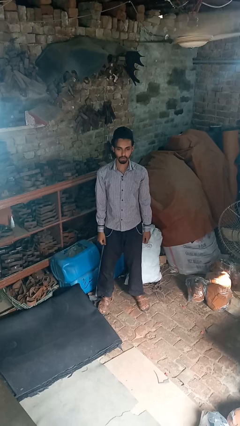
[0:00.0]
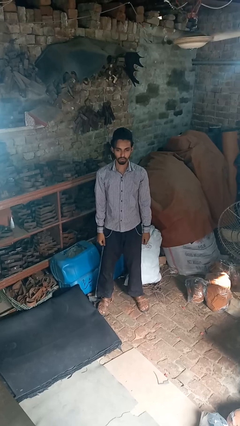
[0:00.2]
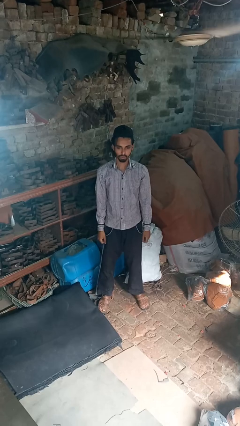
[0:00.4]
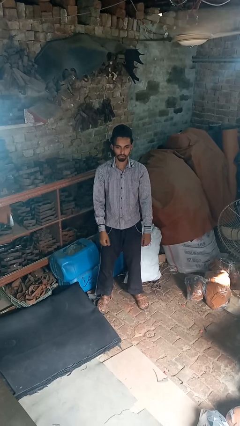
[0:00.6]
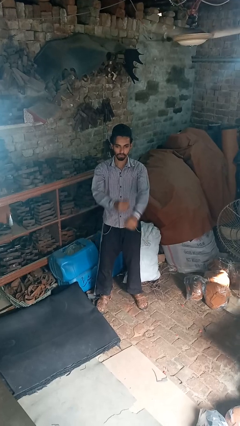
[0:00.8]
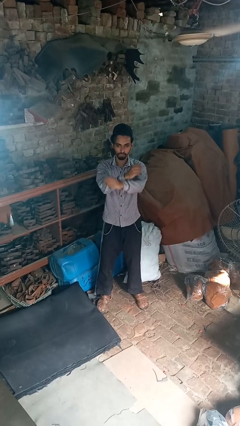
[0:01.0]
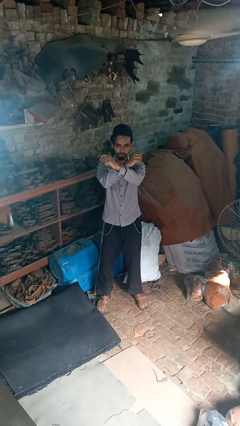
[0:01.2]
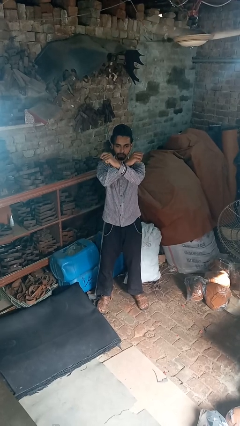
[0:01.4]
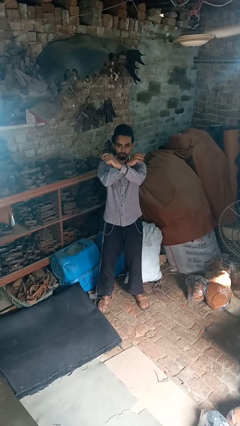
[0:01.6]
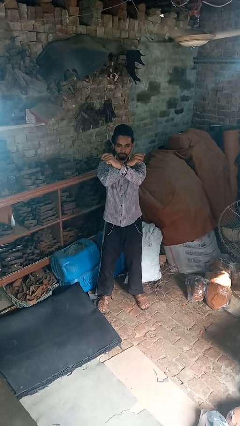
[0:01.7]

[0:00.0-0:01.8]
person crosses arms

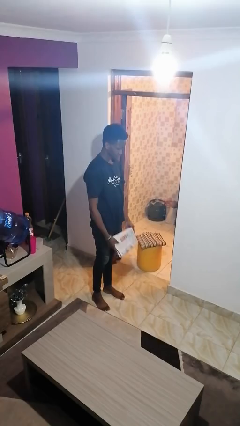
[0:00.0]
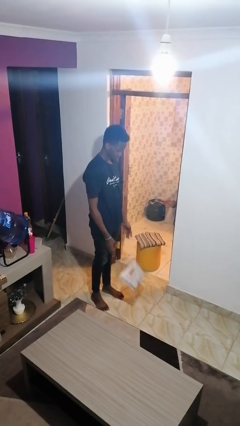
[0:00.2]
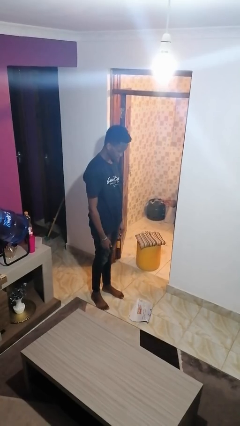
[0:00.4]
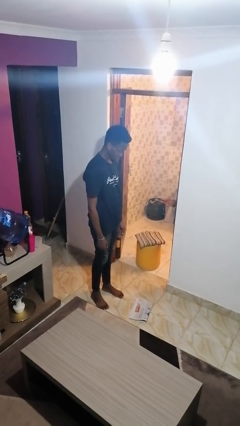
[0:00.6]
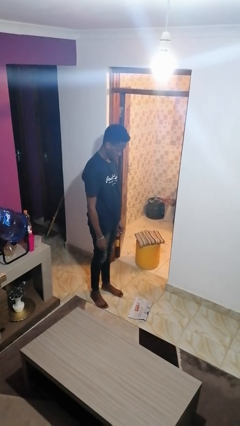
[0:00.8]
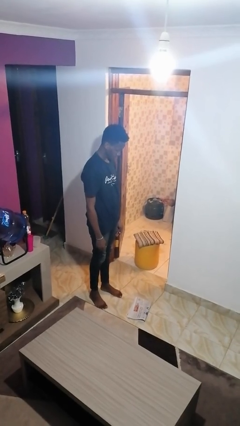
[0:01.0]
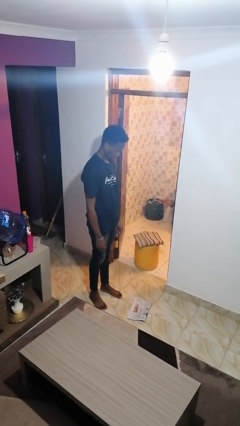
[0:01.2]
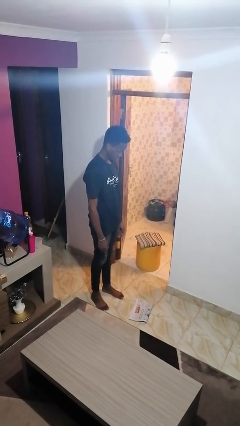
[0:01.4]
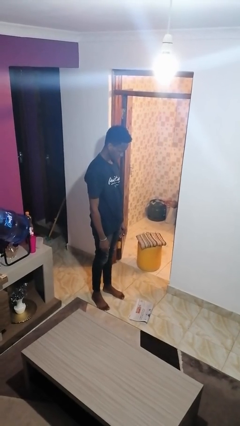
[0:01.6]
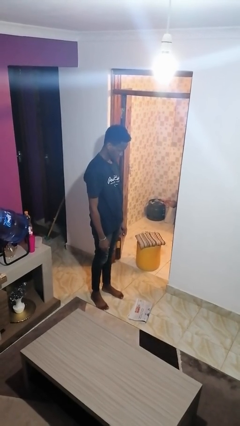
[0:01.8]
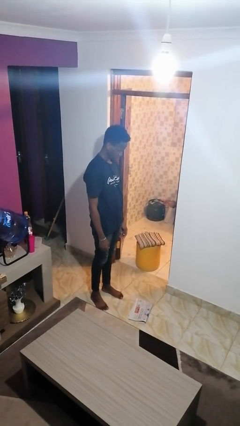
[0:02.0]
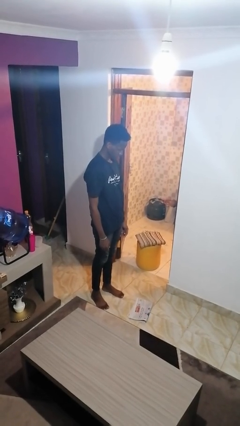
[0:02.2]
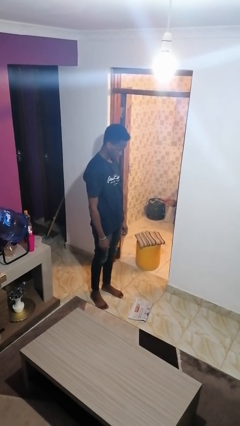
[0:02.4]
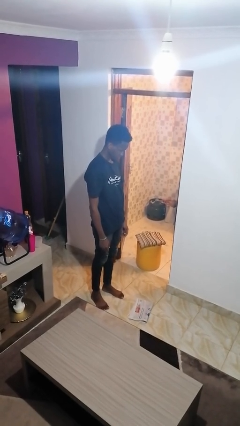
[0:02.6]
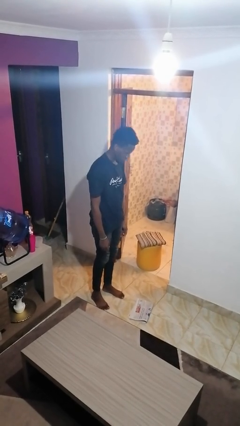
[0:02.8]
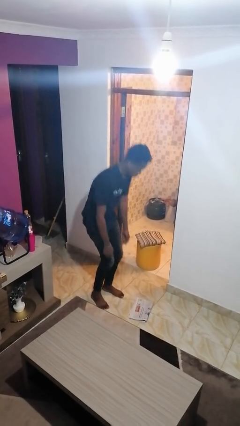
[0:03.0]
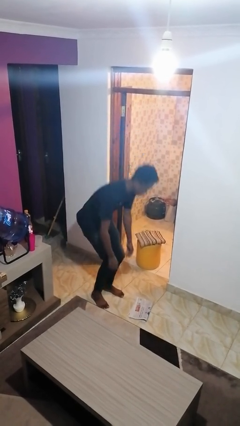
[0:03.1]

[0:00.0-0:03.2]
person drops object

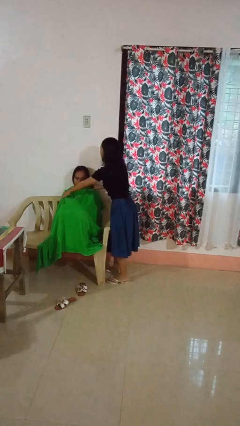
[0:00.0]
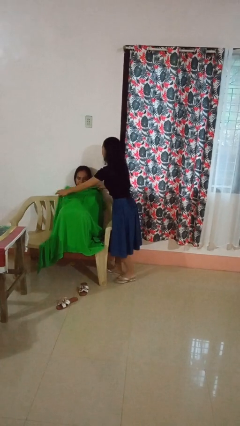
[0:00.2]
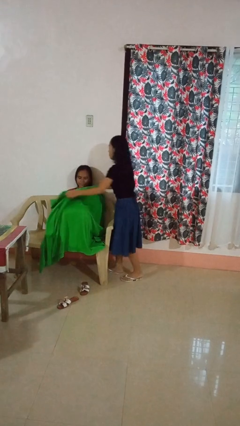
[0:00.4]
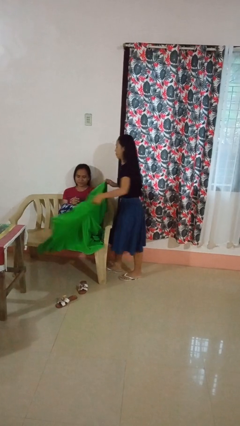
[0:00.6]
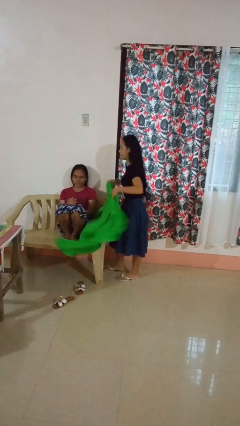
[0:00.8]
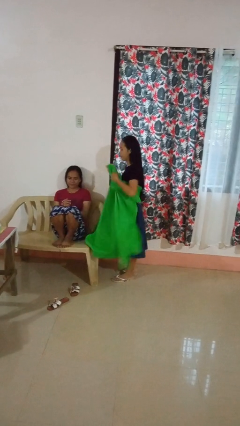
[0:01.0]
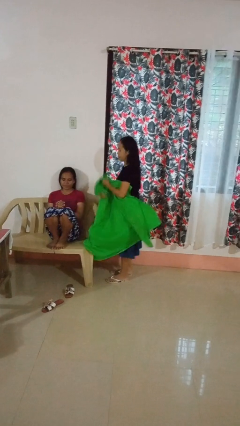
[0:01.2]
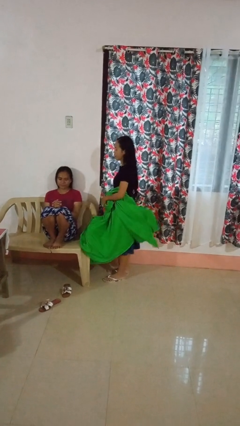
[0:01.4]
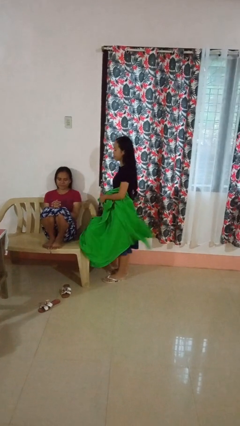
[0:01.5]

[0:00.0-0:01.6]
person uncovers friend with blanket

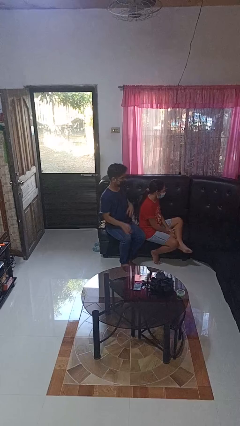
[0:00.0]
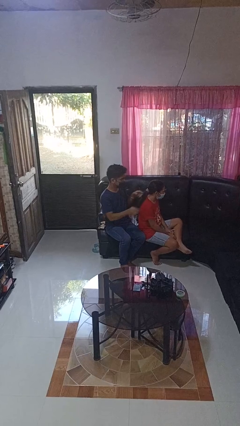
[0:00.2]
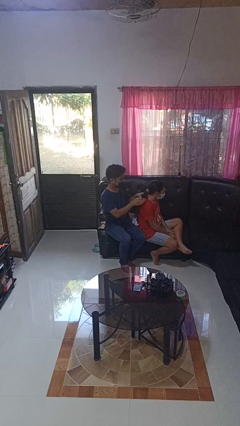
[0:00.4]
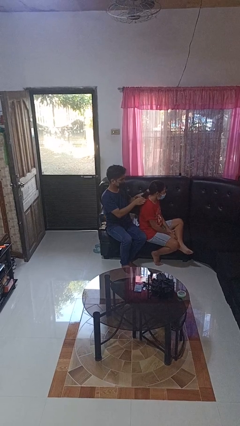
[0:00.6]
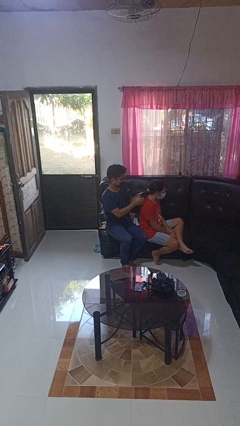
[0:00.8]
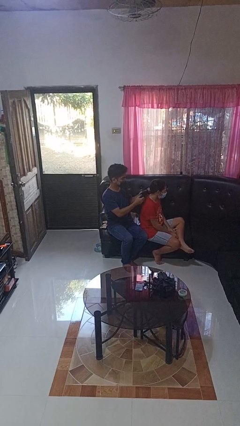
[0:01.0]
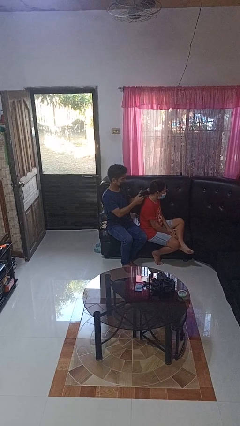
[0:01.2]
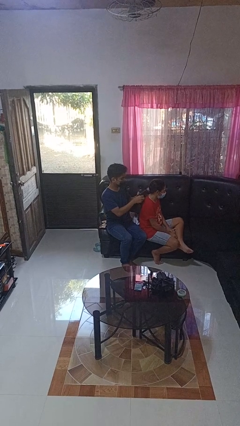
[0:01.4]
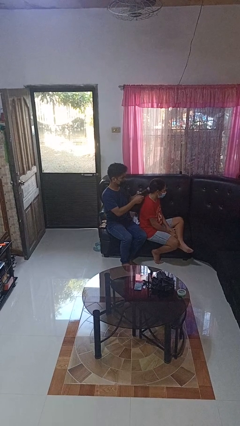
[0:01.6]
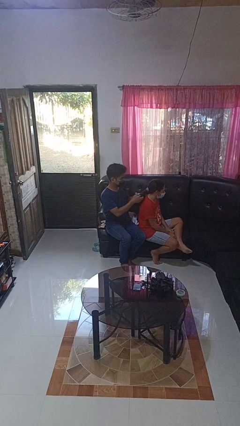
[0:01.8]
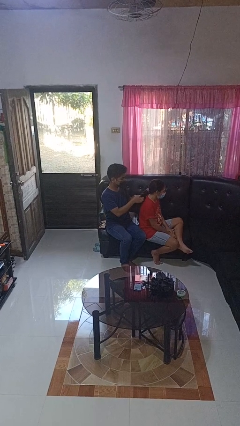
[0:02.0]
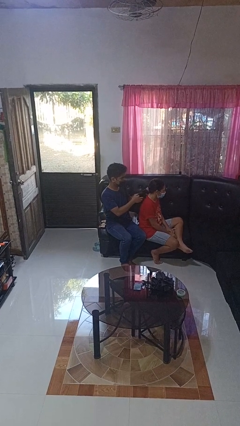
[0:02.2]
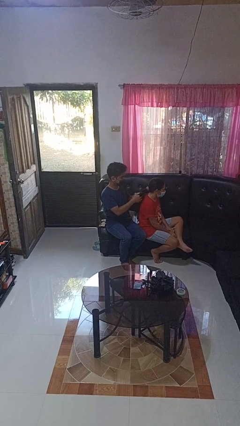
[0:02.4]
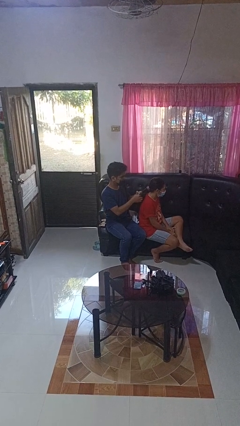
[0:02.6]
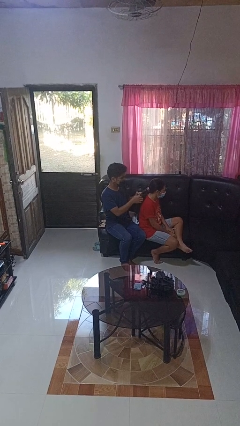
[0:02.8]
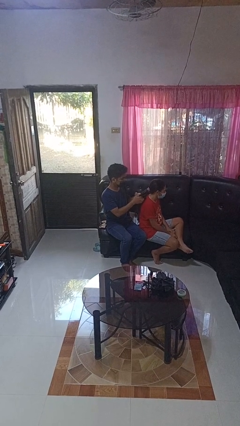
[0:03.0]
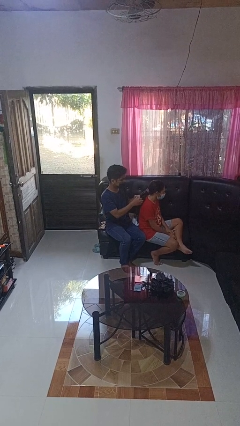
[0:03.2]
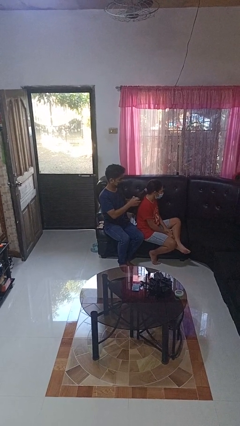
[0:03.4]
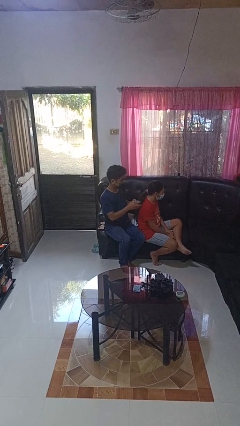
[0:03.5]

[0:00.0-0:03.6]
person braids hair of person

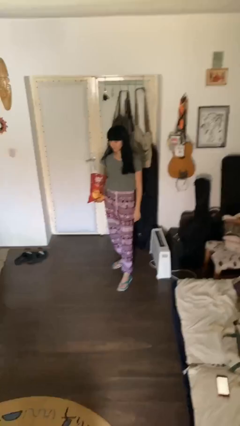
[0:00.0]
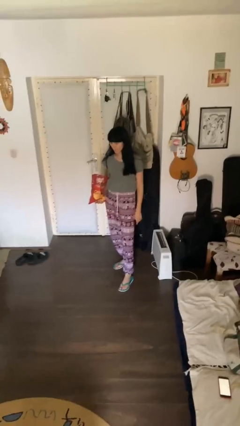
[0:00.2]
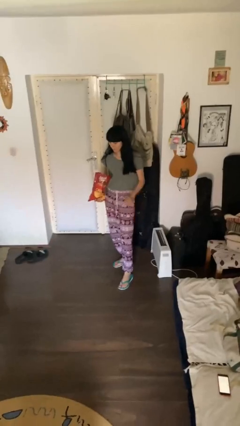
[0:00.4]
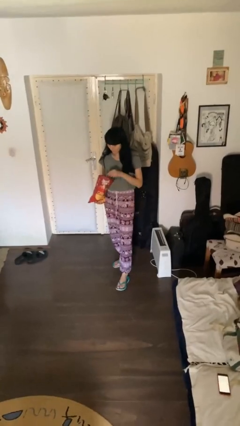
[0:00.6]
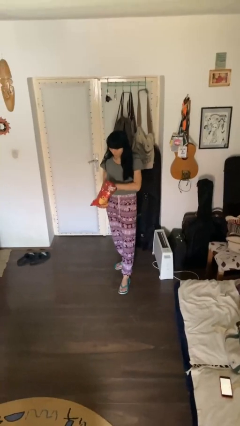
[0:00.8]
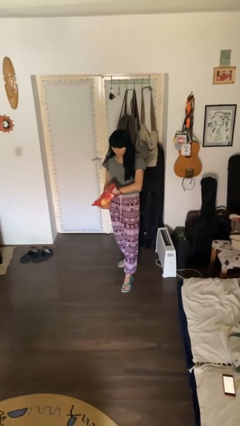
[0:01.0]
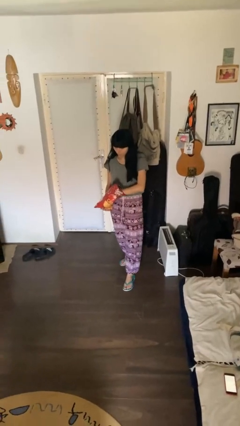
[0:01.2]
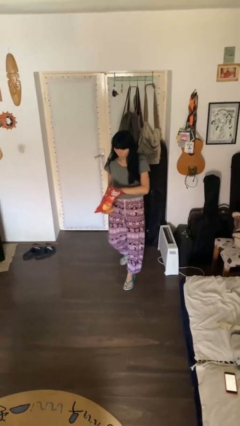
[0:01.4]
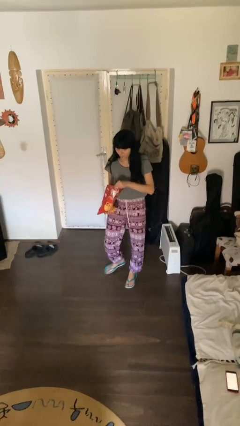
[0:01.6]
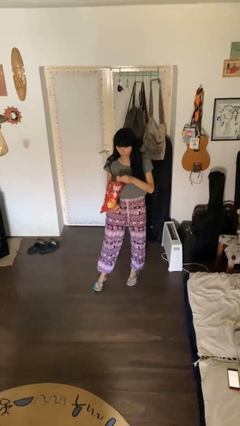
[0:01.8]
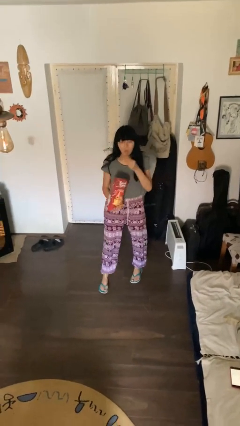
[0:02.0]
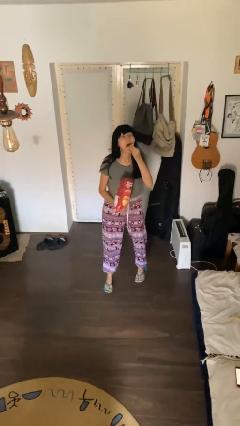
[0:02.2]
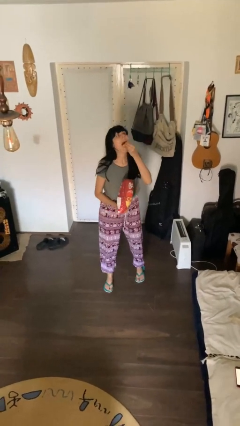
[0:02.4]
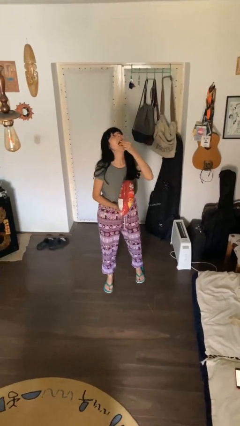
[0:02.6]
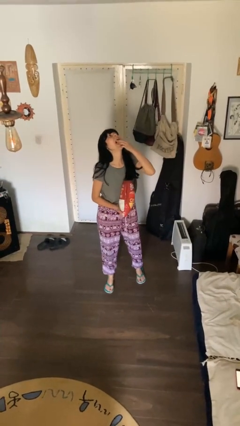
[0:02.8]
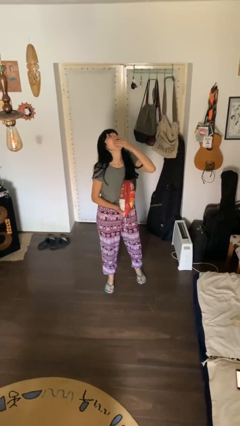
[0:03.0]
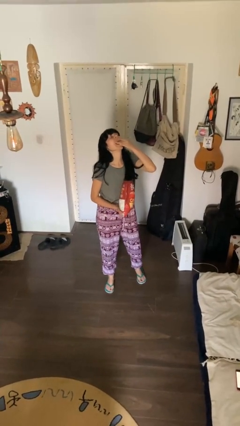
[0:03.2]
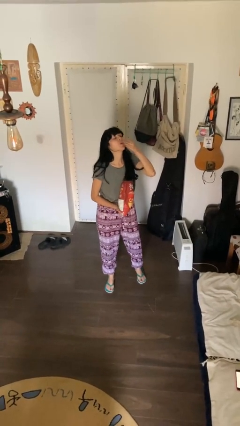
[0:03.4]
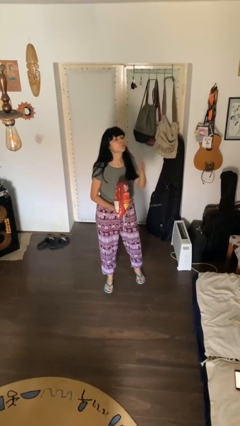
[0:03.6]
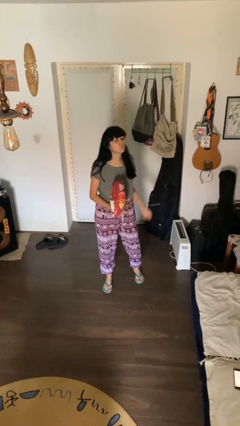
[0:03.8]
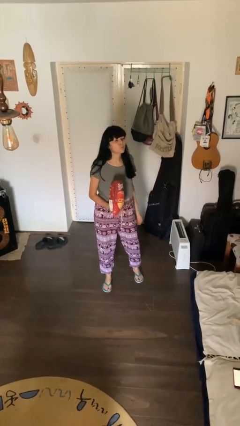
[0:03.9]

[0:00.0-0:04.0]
person eats snack from bag

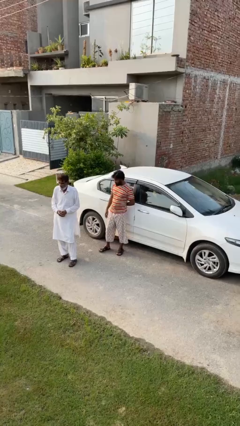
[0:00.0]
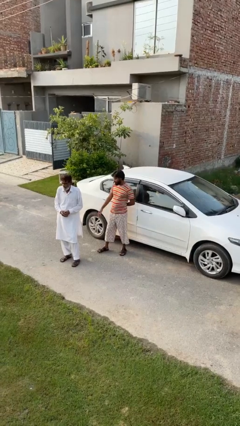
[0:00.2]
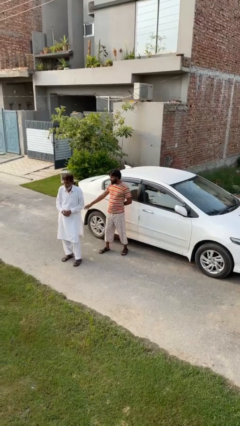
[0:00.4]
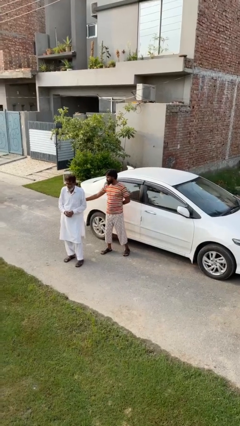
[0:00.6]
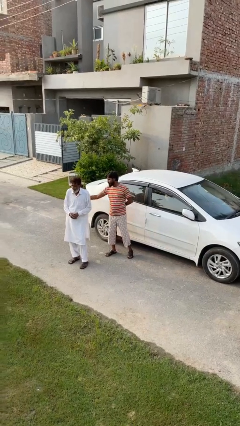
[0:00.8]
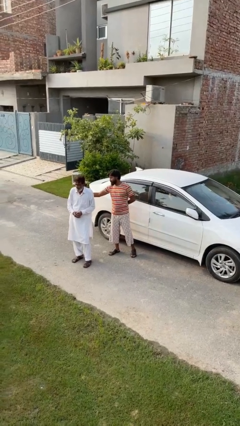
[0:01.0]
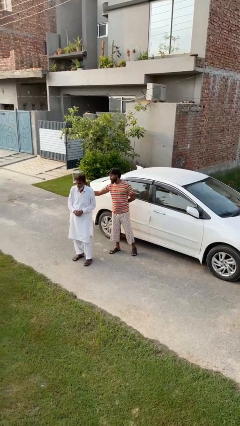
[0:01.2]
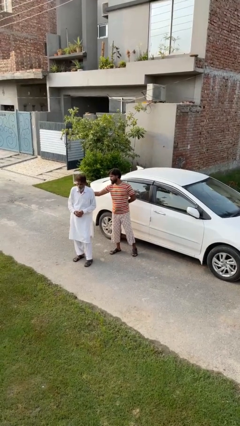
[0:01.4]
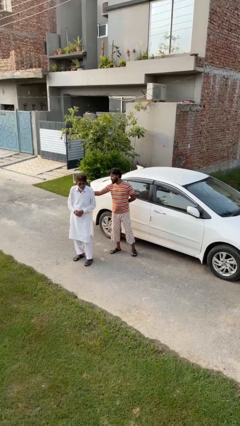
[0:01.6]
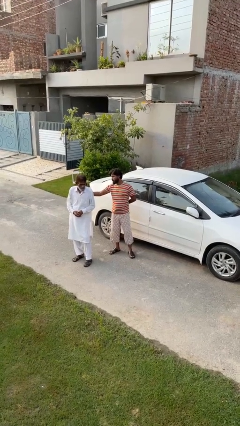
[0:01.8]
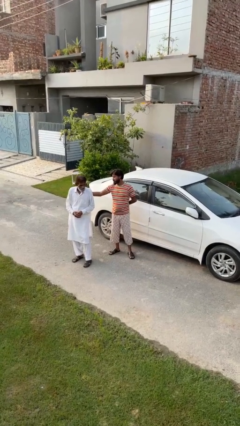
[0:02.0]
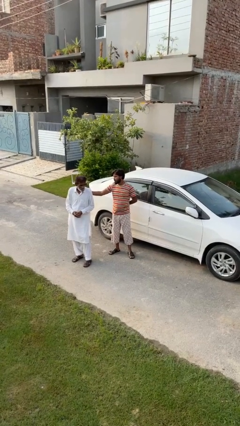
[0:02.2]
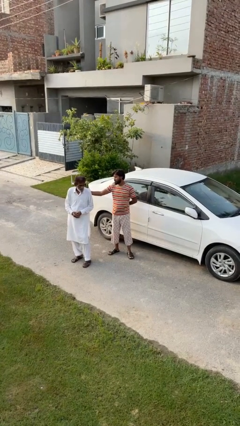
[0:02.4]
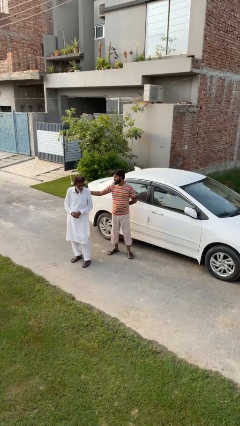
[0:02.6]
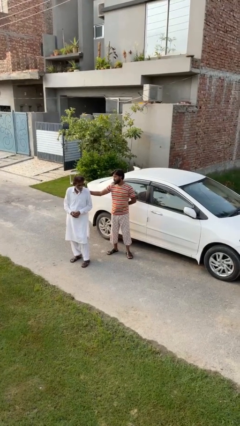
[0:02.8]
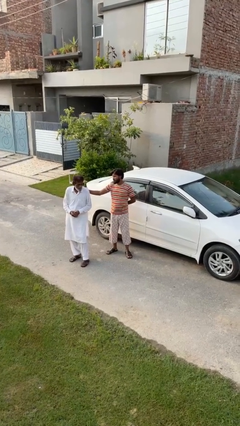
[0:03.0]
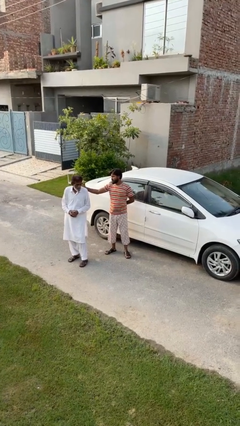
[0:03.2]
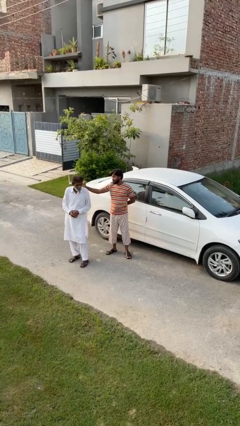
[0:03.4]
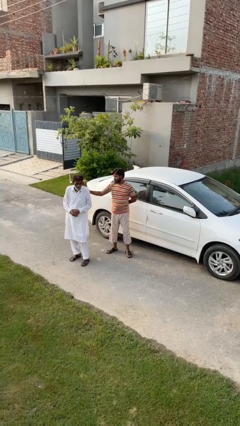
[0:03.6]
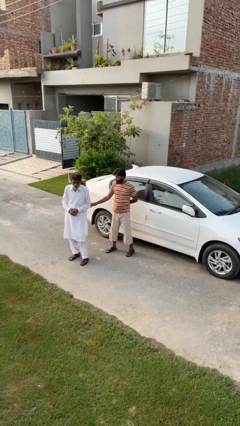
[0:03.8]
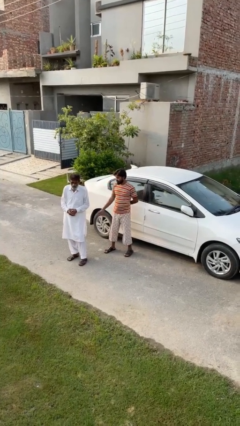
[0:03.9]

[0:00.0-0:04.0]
person touches back of person
